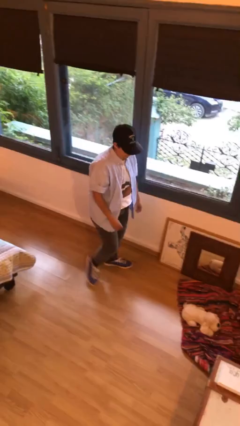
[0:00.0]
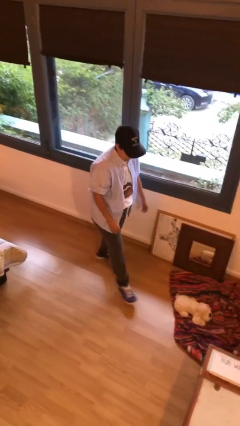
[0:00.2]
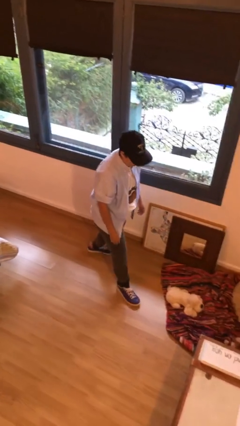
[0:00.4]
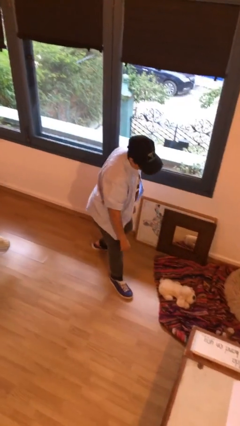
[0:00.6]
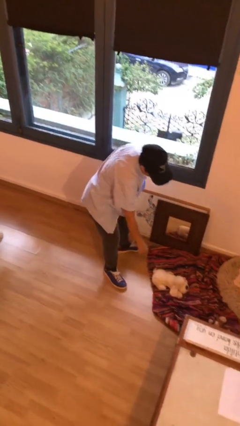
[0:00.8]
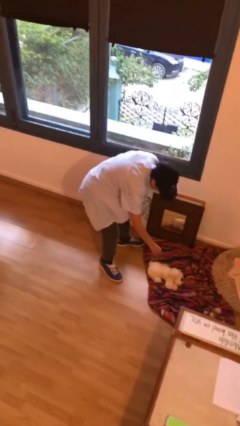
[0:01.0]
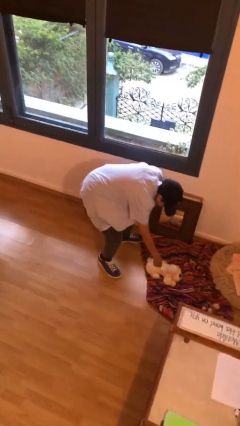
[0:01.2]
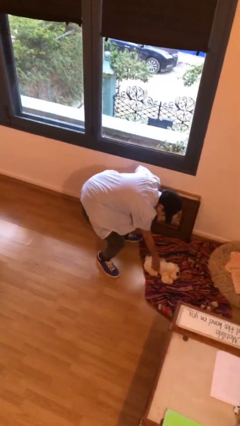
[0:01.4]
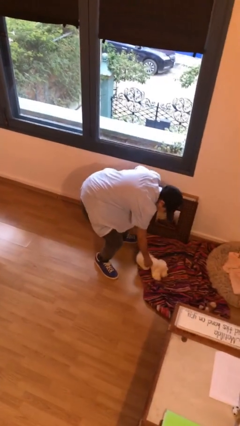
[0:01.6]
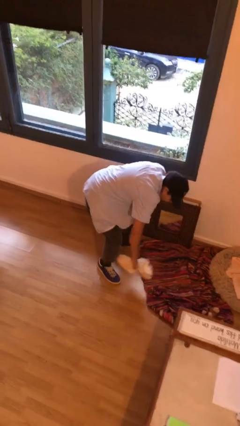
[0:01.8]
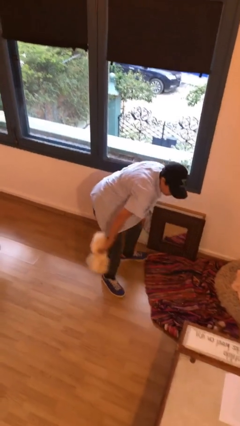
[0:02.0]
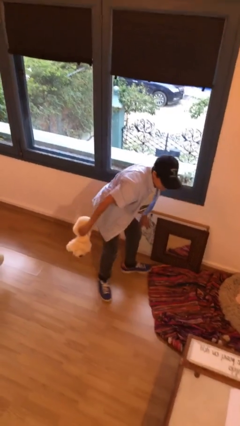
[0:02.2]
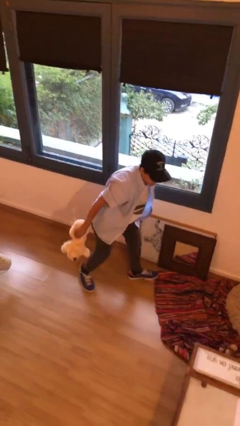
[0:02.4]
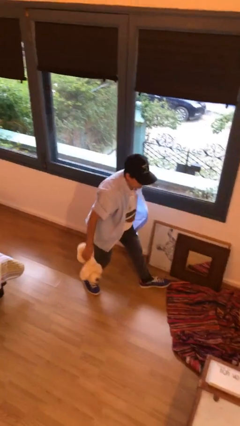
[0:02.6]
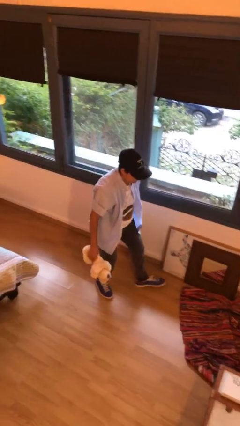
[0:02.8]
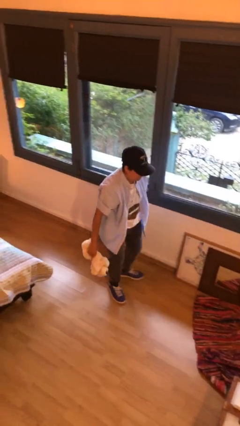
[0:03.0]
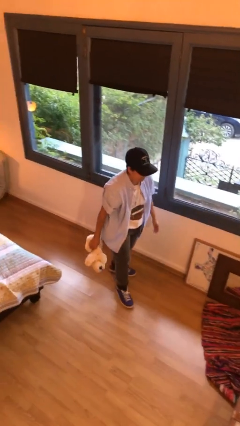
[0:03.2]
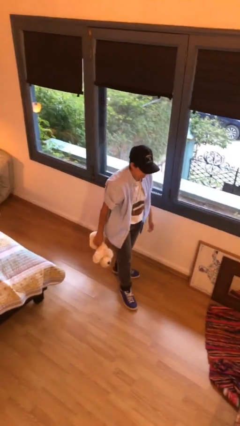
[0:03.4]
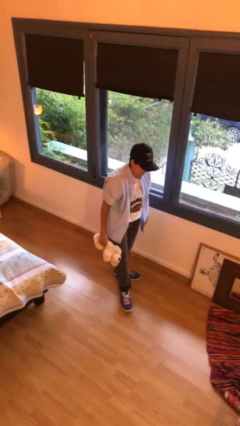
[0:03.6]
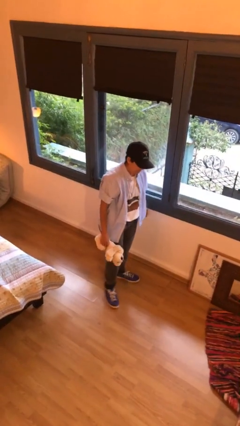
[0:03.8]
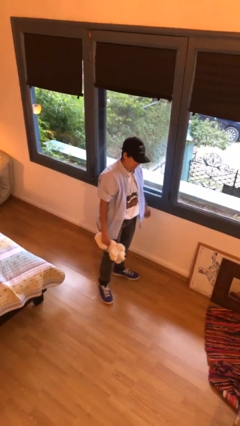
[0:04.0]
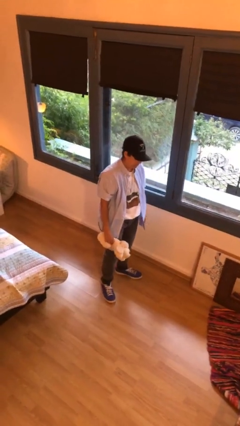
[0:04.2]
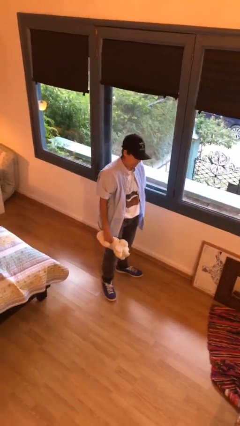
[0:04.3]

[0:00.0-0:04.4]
person picks up object from floor

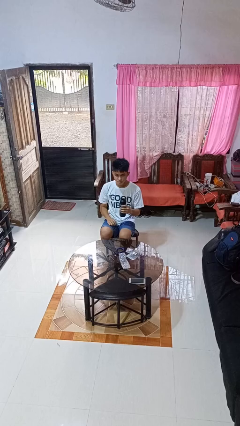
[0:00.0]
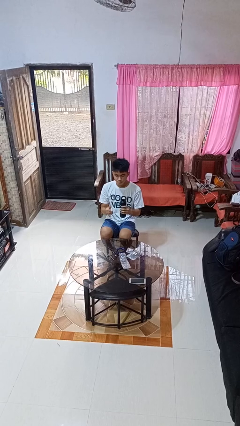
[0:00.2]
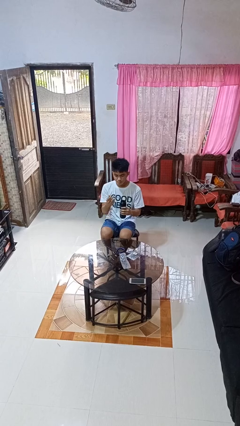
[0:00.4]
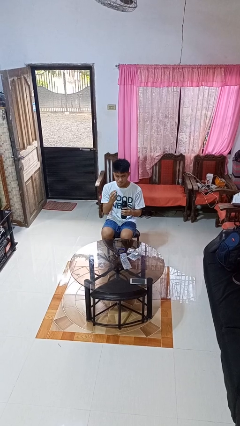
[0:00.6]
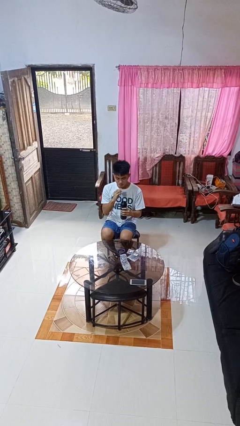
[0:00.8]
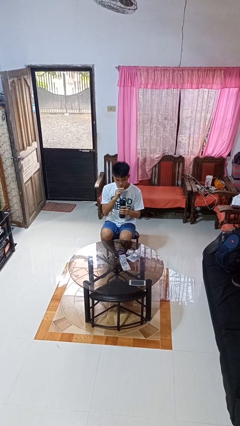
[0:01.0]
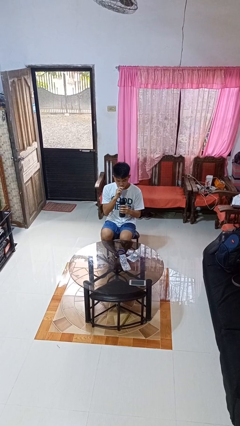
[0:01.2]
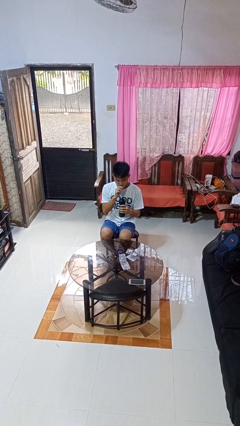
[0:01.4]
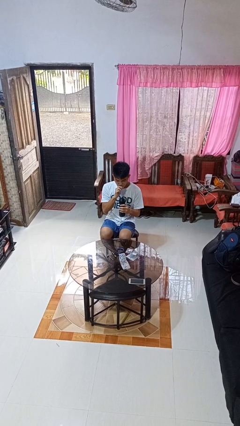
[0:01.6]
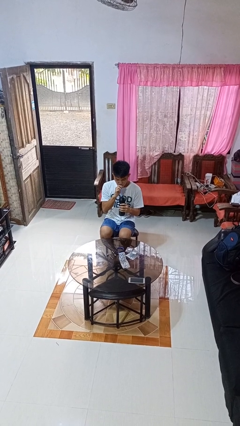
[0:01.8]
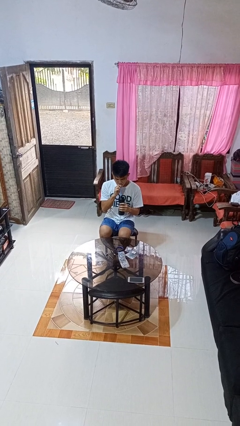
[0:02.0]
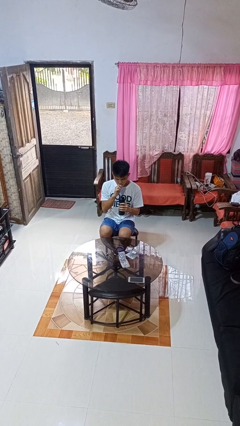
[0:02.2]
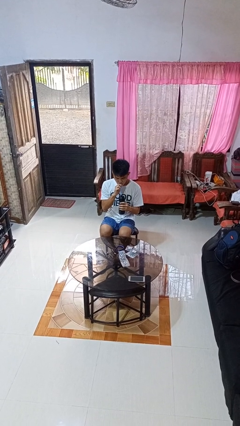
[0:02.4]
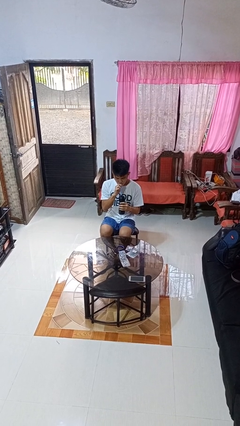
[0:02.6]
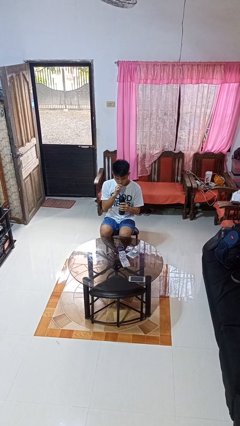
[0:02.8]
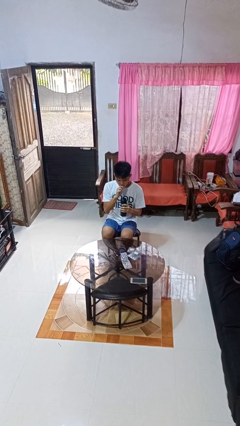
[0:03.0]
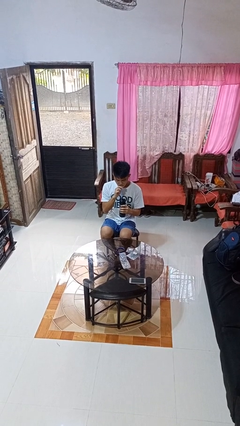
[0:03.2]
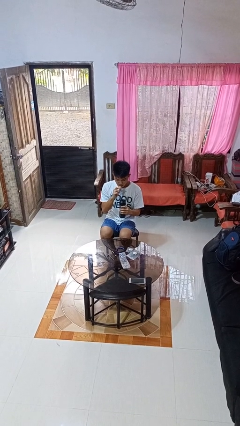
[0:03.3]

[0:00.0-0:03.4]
person drinks from straw

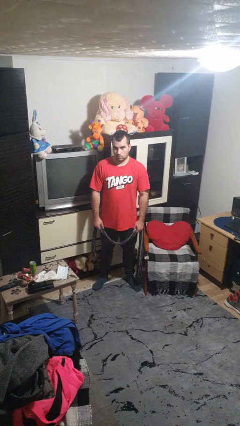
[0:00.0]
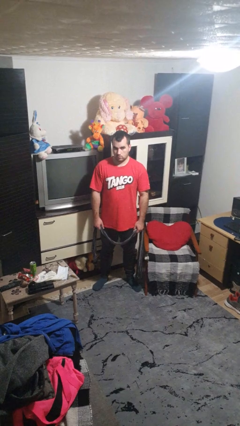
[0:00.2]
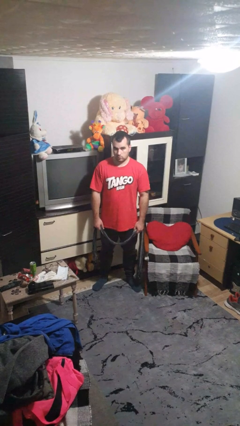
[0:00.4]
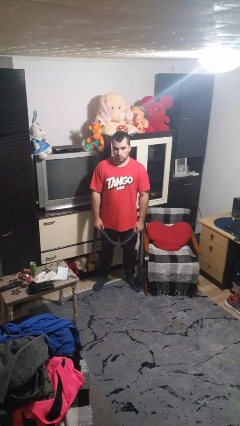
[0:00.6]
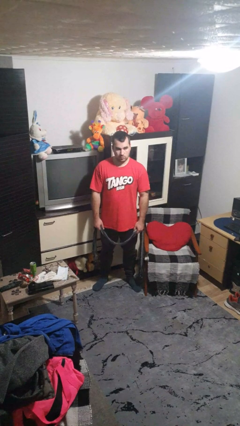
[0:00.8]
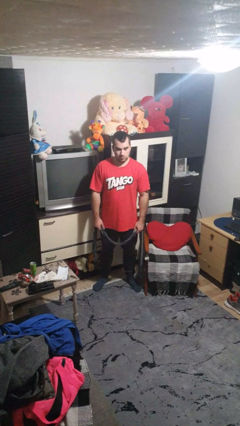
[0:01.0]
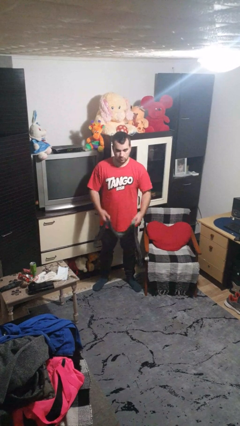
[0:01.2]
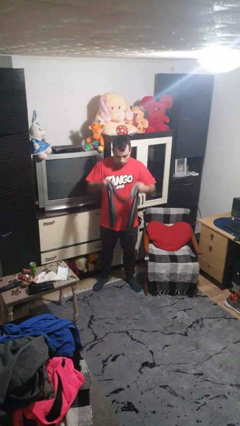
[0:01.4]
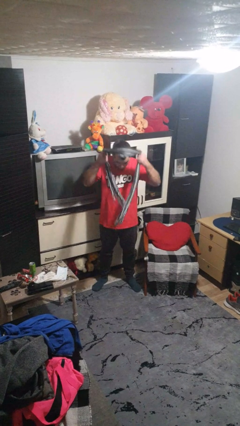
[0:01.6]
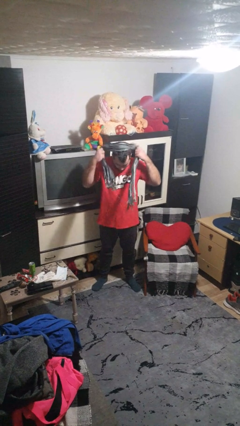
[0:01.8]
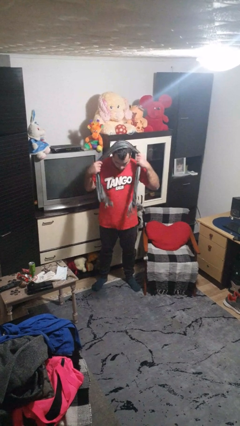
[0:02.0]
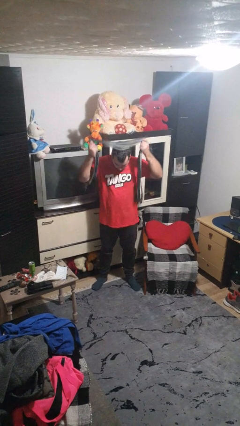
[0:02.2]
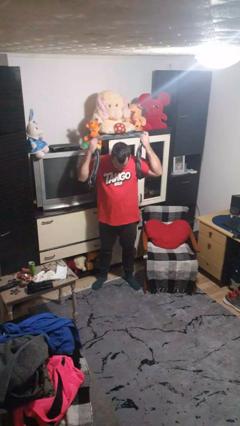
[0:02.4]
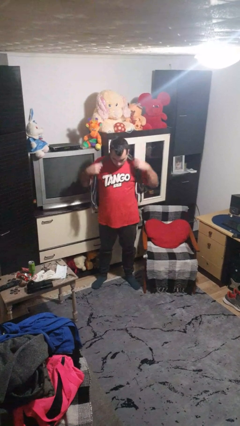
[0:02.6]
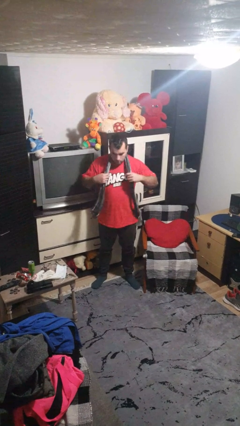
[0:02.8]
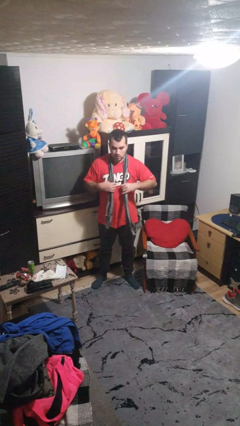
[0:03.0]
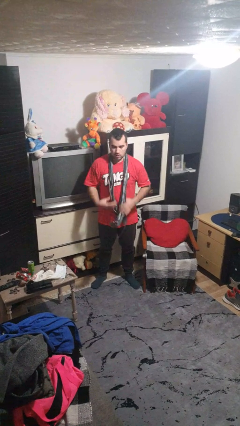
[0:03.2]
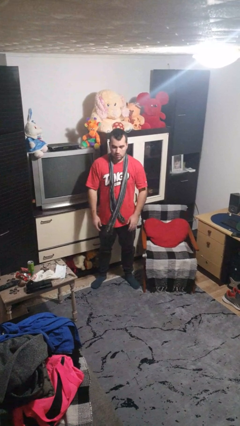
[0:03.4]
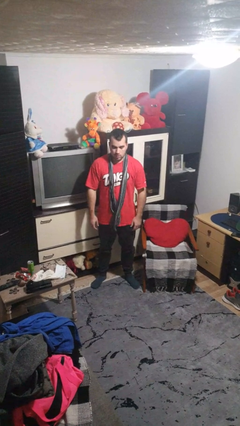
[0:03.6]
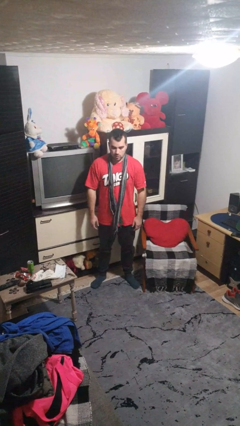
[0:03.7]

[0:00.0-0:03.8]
person puts on scarf

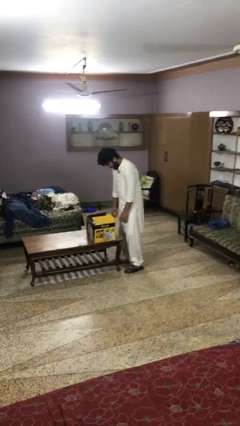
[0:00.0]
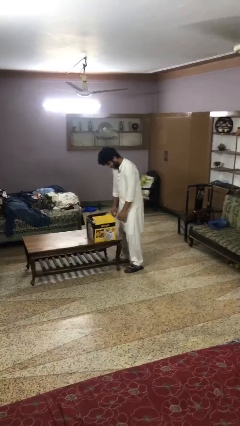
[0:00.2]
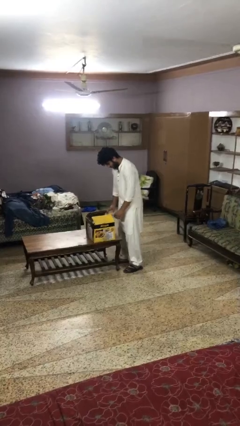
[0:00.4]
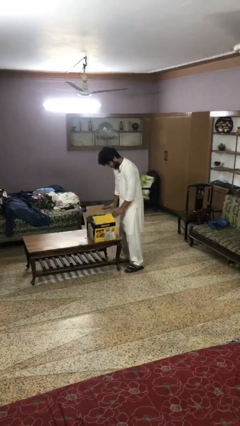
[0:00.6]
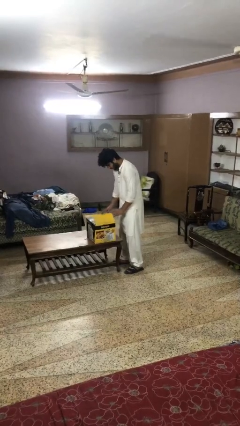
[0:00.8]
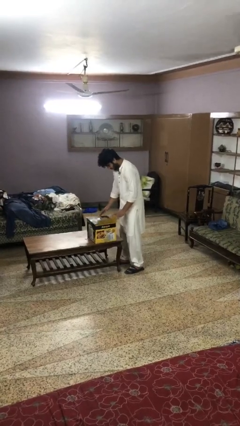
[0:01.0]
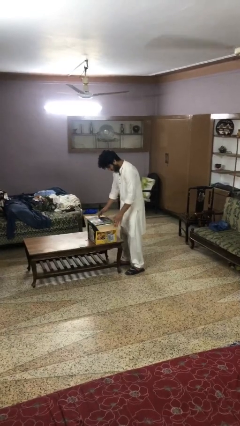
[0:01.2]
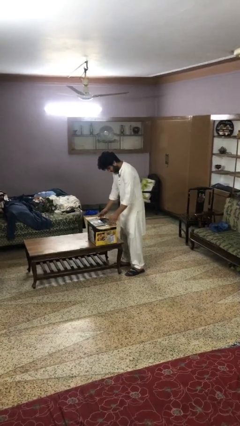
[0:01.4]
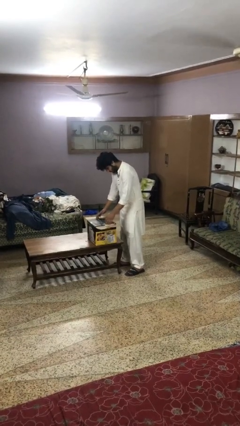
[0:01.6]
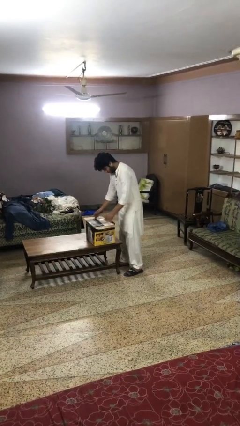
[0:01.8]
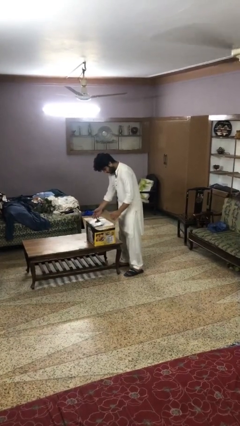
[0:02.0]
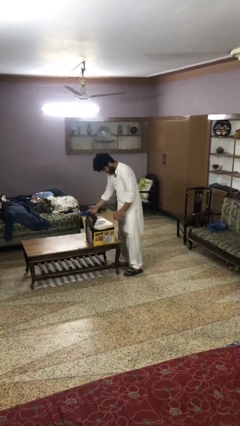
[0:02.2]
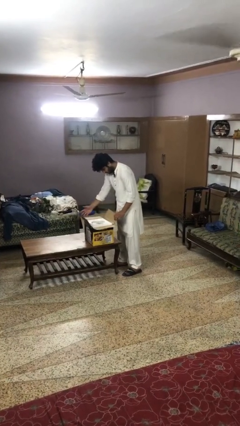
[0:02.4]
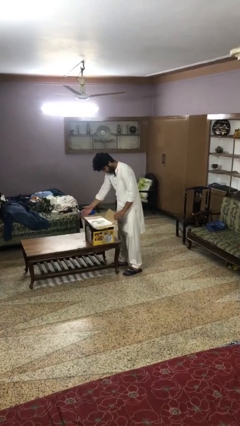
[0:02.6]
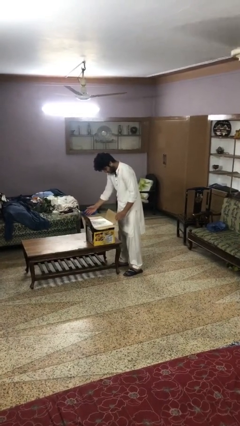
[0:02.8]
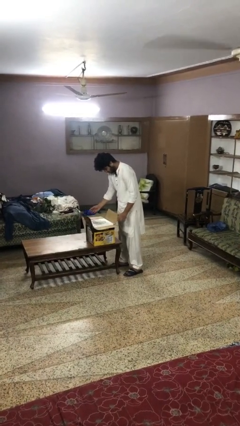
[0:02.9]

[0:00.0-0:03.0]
person opens box

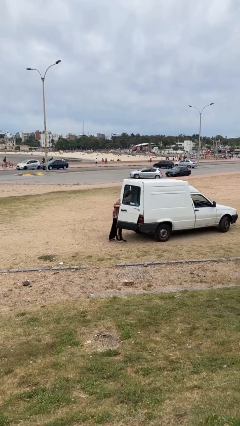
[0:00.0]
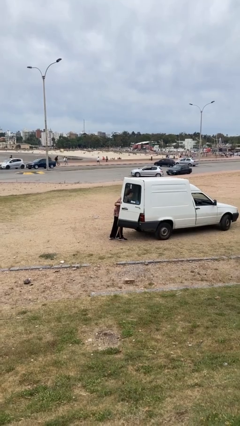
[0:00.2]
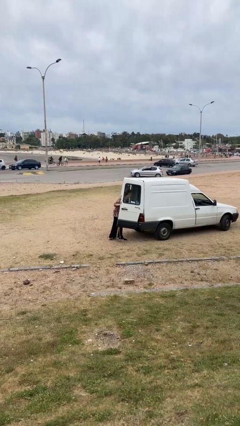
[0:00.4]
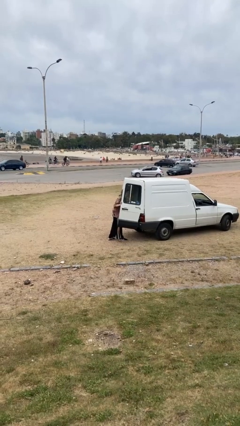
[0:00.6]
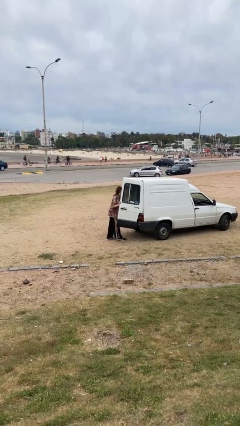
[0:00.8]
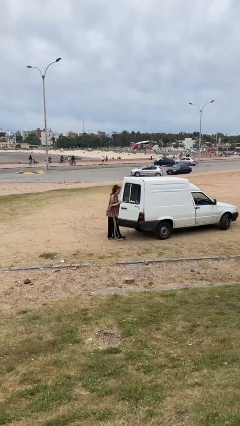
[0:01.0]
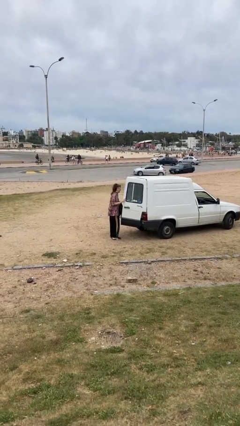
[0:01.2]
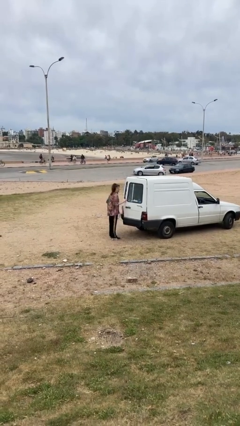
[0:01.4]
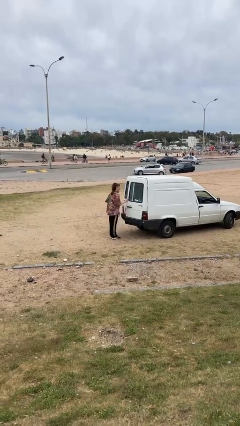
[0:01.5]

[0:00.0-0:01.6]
person unloads car

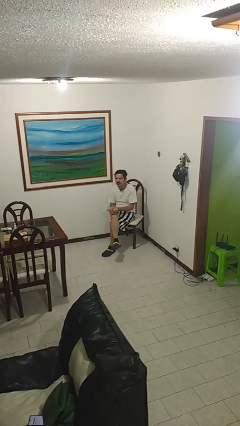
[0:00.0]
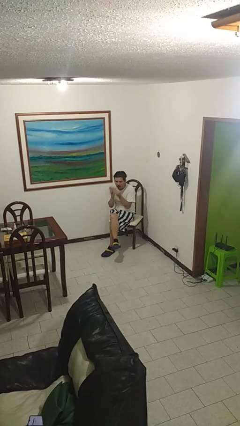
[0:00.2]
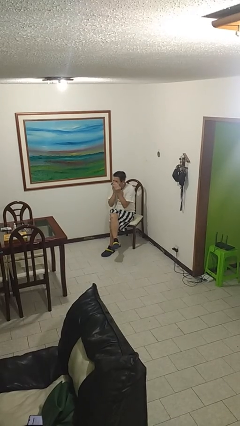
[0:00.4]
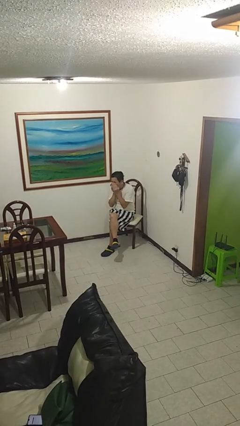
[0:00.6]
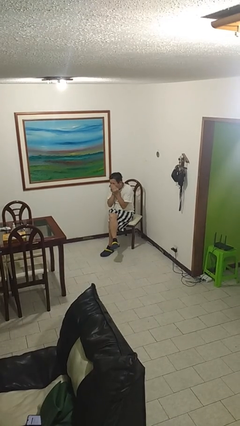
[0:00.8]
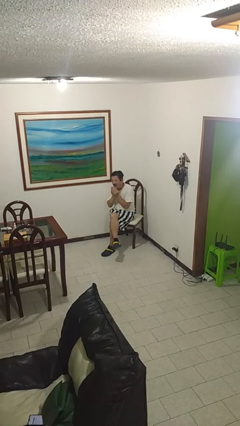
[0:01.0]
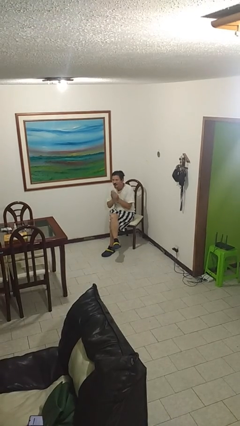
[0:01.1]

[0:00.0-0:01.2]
person blows nose
